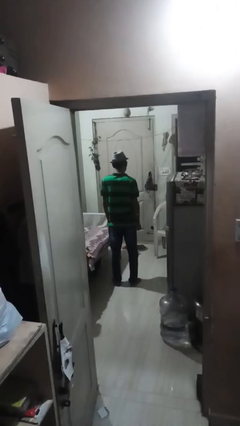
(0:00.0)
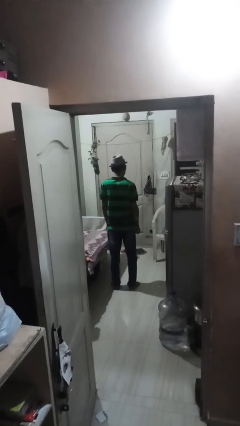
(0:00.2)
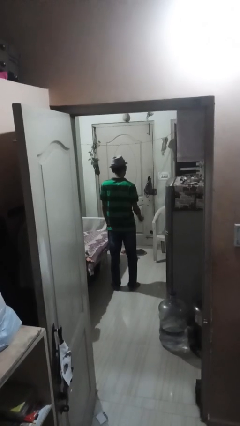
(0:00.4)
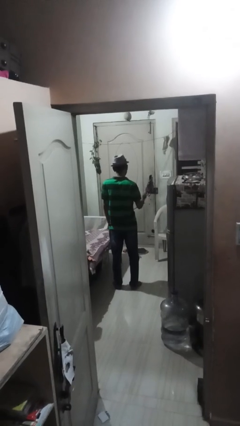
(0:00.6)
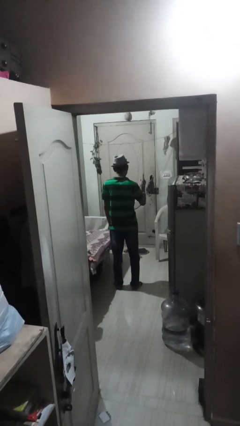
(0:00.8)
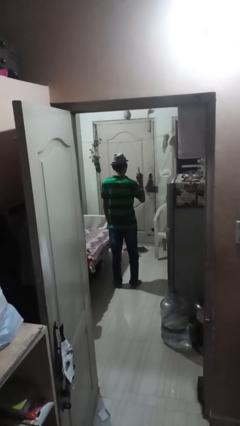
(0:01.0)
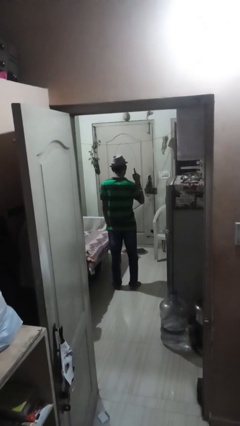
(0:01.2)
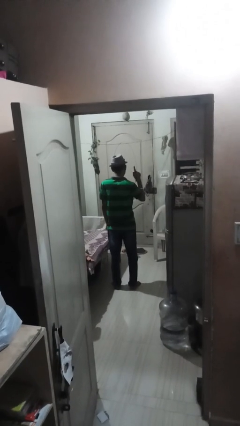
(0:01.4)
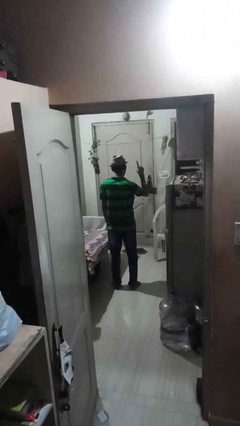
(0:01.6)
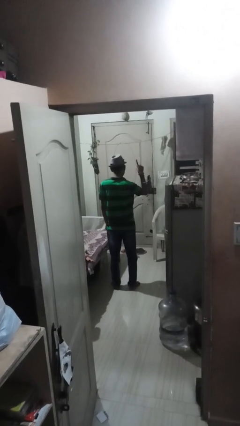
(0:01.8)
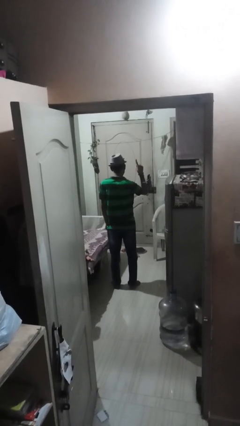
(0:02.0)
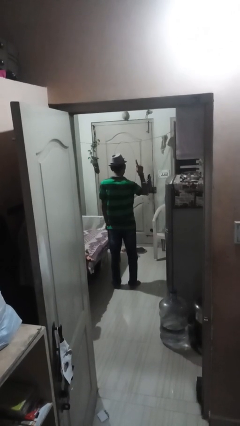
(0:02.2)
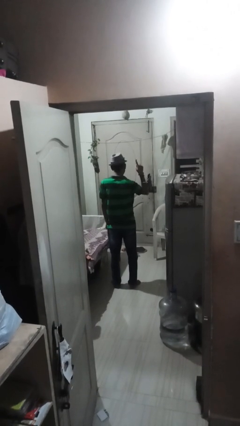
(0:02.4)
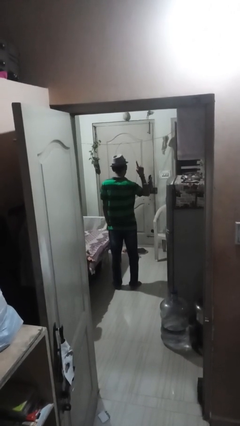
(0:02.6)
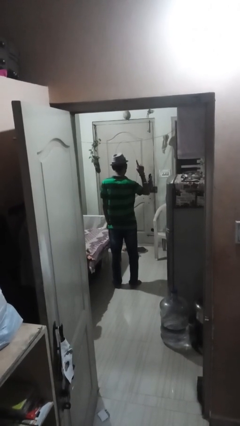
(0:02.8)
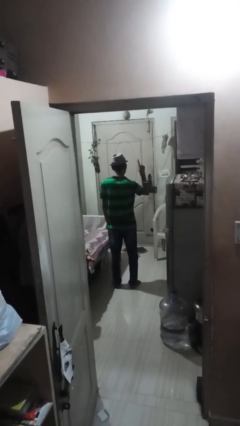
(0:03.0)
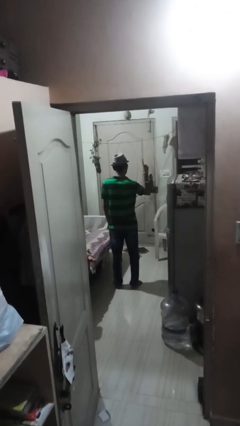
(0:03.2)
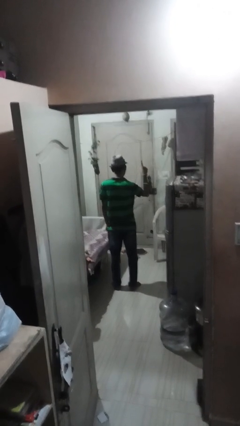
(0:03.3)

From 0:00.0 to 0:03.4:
person gestures number one

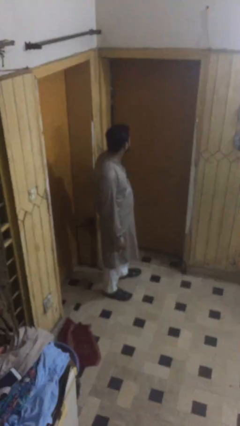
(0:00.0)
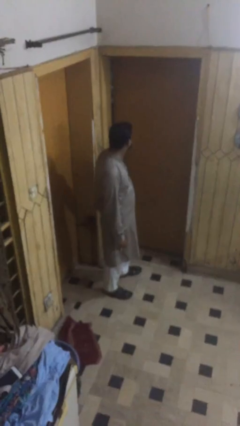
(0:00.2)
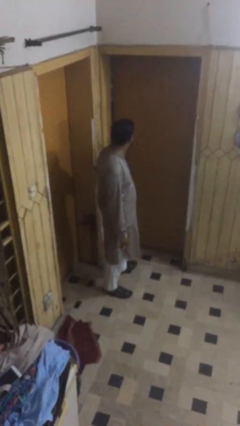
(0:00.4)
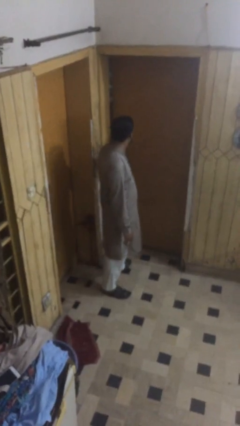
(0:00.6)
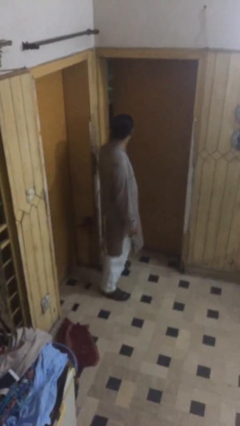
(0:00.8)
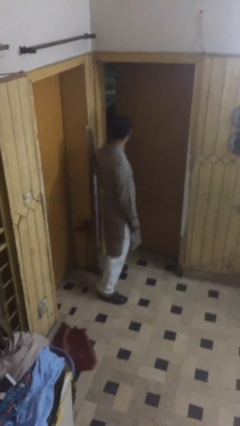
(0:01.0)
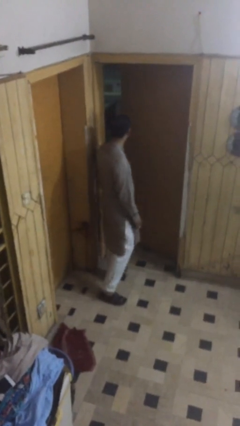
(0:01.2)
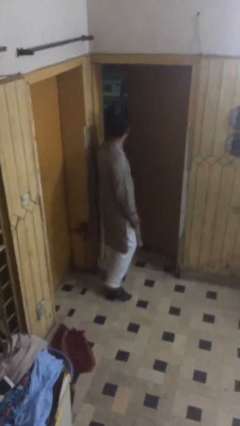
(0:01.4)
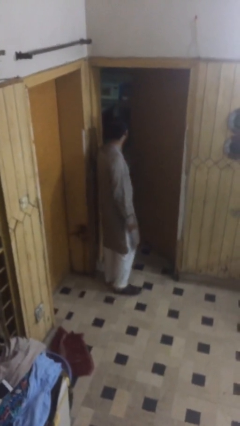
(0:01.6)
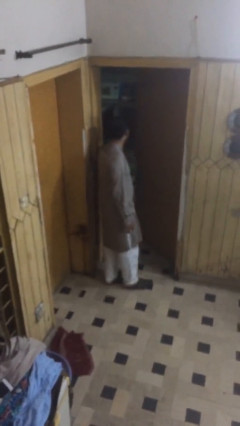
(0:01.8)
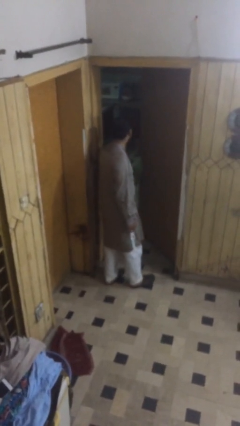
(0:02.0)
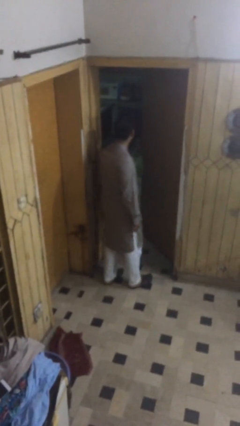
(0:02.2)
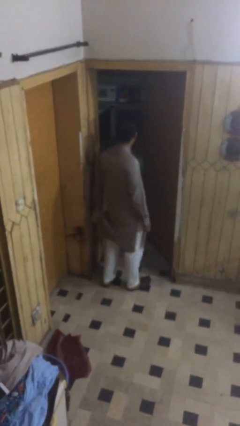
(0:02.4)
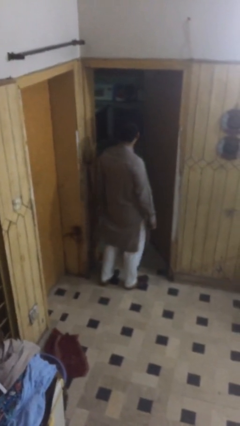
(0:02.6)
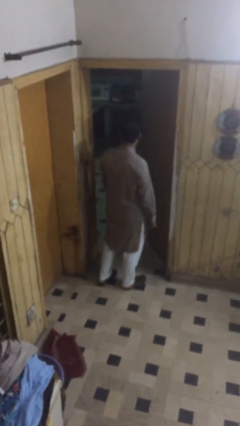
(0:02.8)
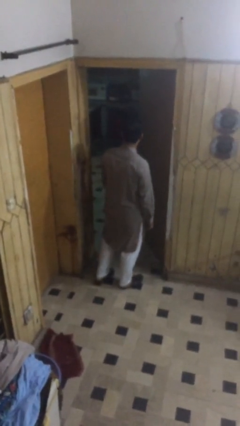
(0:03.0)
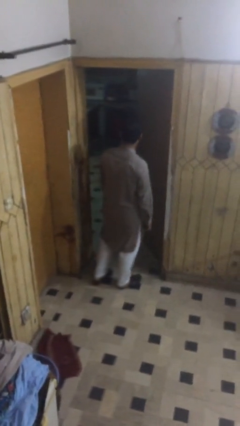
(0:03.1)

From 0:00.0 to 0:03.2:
person opens facility door

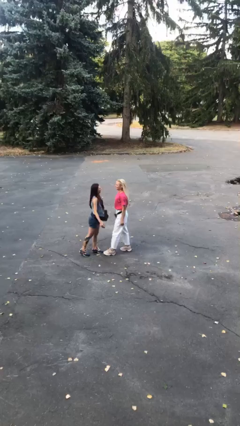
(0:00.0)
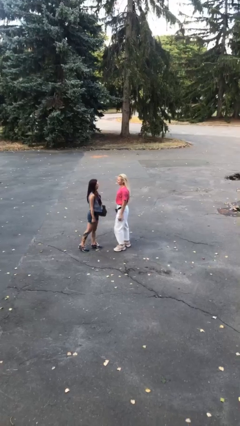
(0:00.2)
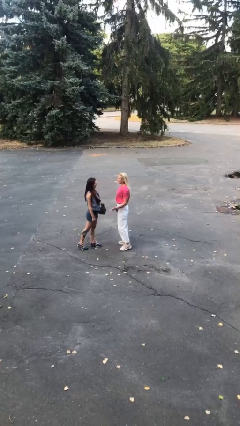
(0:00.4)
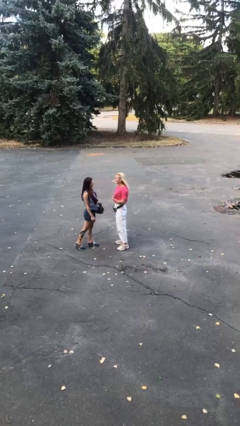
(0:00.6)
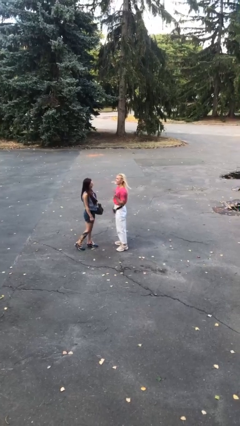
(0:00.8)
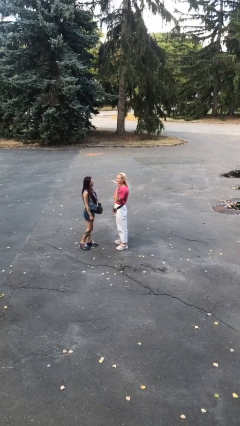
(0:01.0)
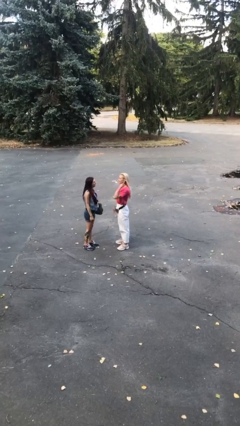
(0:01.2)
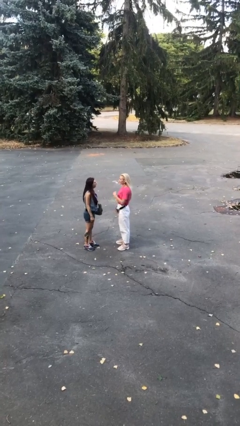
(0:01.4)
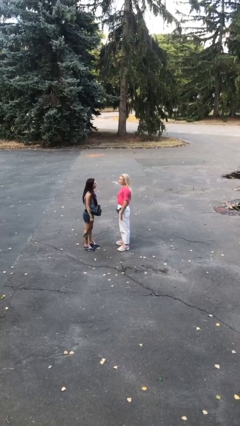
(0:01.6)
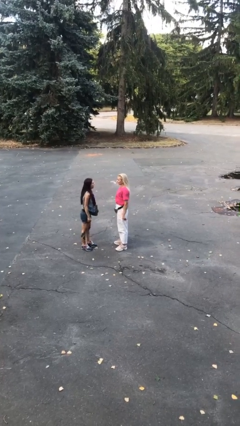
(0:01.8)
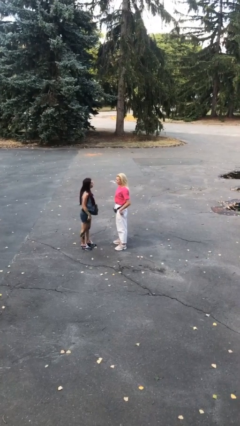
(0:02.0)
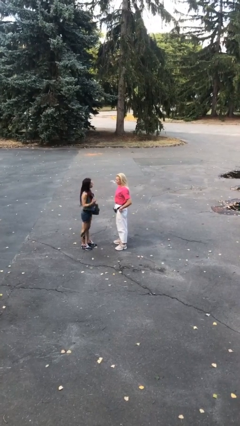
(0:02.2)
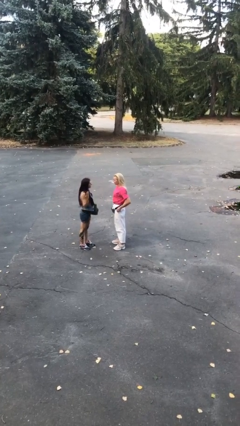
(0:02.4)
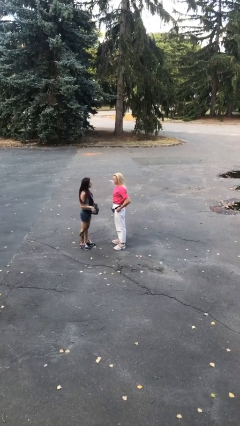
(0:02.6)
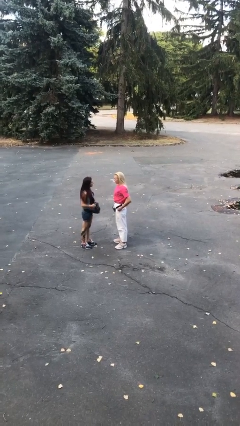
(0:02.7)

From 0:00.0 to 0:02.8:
person talks to person

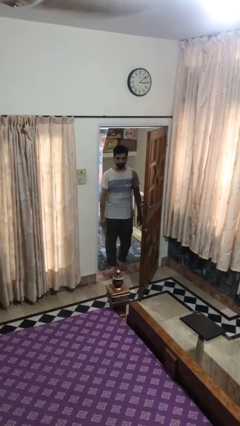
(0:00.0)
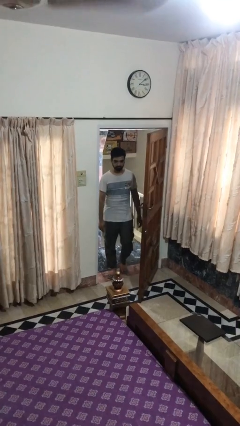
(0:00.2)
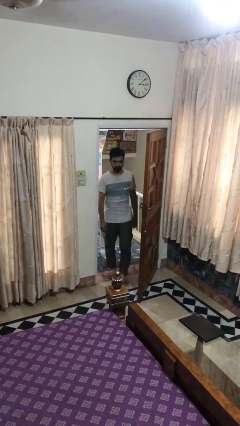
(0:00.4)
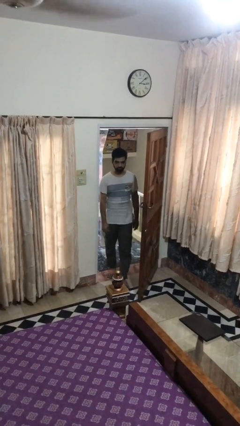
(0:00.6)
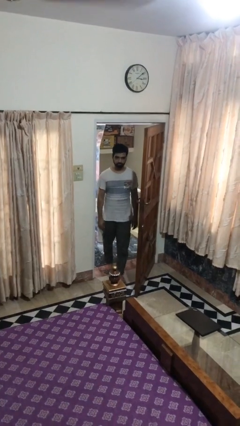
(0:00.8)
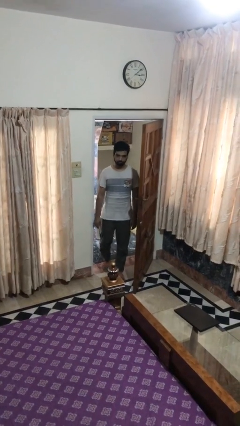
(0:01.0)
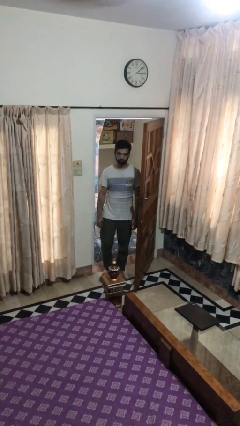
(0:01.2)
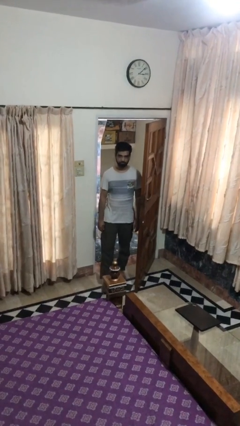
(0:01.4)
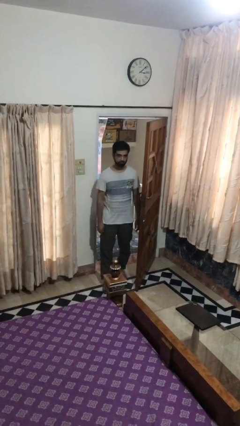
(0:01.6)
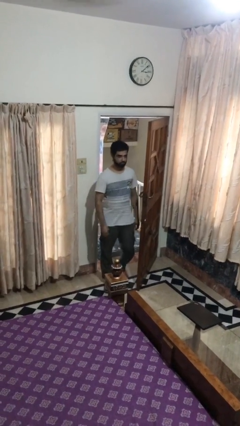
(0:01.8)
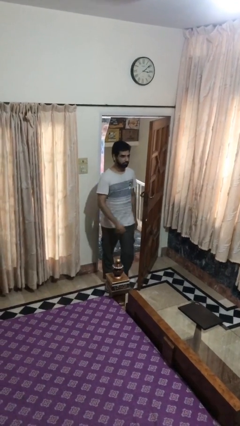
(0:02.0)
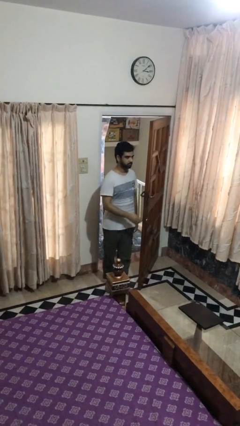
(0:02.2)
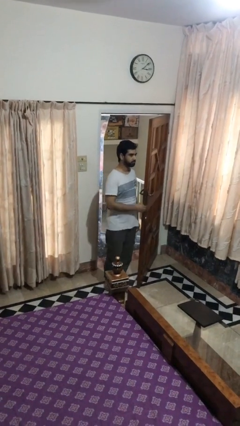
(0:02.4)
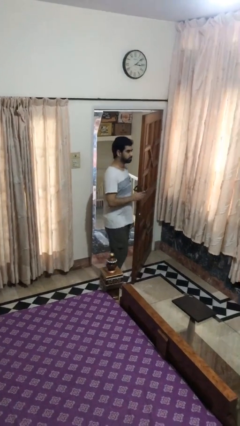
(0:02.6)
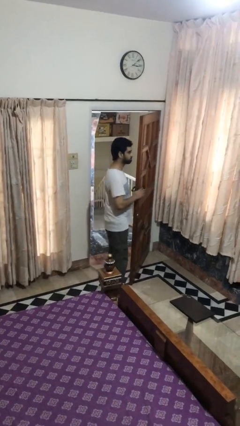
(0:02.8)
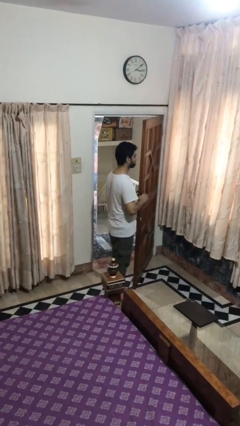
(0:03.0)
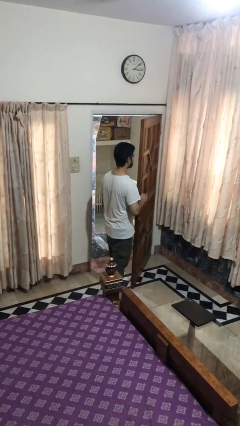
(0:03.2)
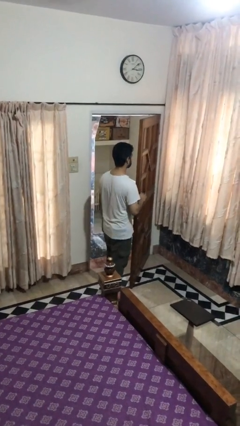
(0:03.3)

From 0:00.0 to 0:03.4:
person enters scene through structure

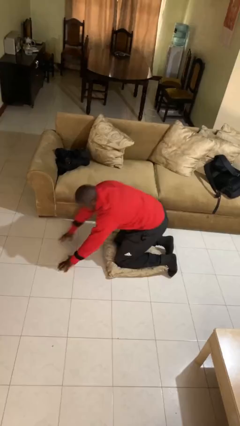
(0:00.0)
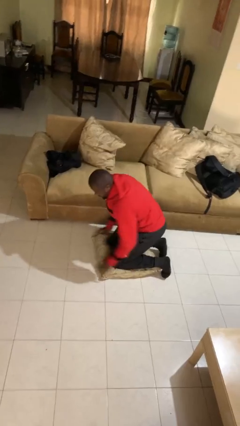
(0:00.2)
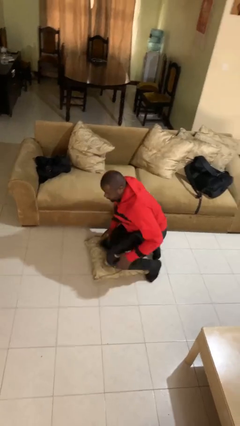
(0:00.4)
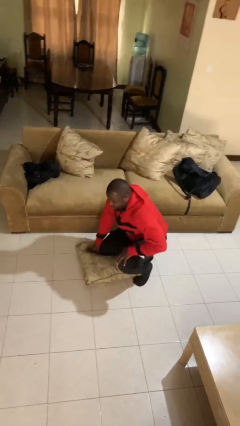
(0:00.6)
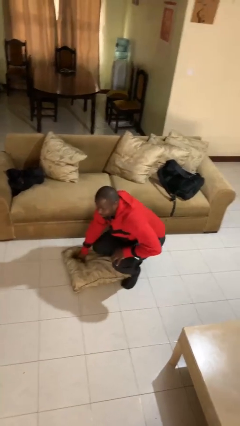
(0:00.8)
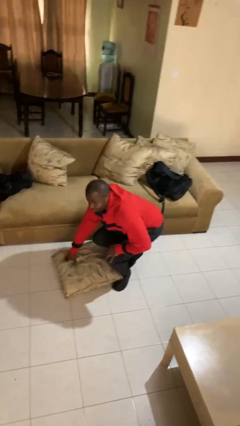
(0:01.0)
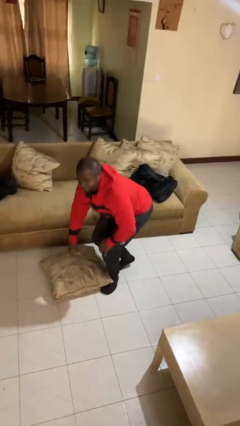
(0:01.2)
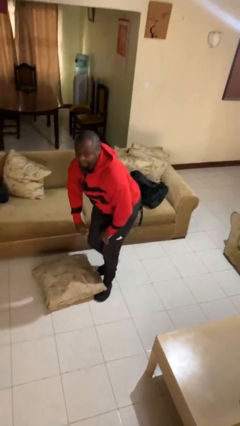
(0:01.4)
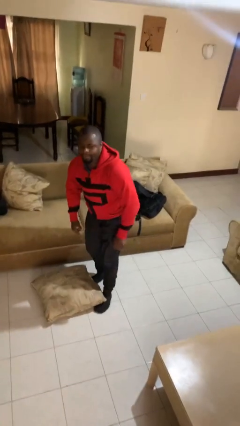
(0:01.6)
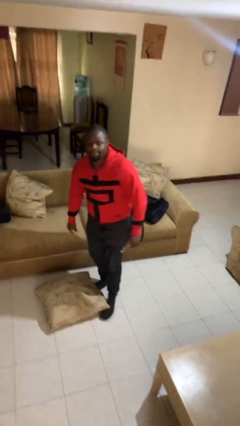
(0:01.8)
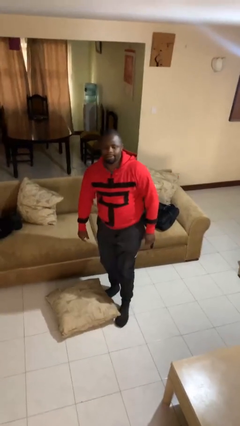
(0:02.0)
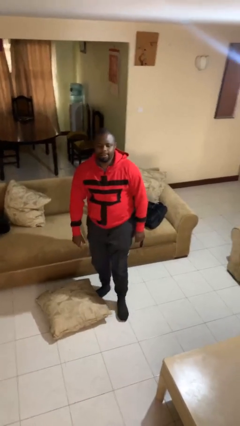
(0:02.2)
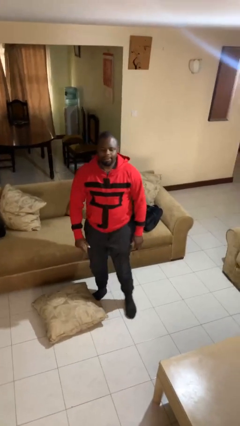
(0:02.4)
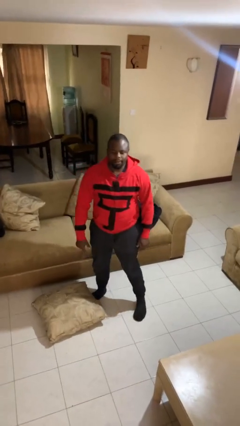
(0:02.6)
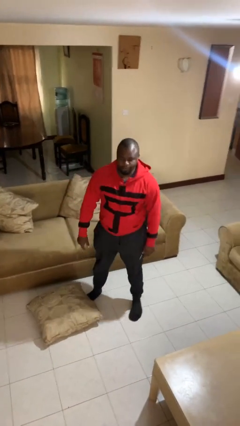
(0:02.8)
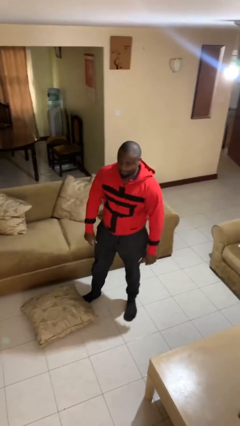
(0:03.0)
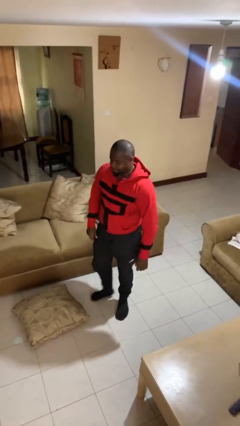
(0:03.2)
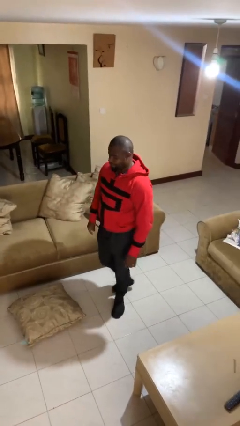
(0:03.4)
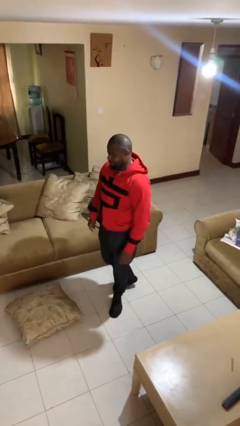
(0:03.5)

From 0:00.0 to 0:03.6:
person stands up from floor

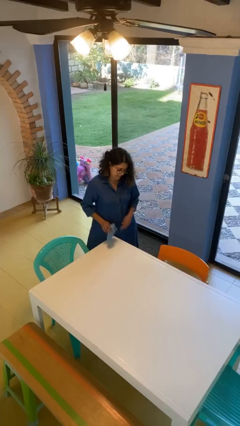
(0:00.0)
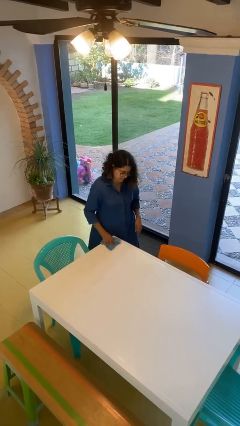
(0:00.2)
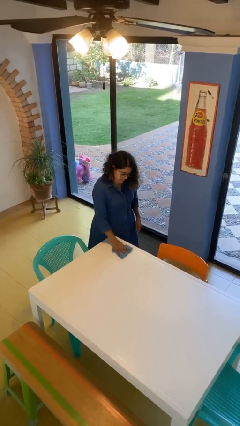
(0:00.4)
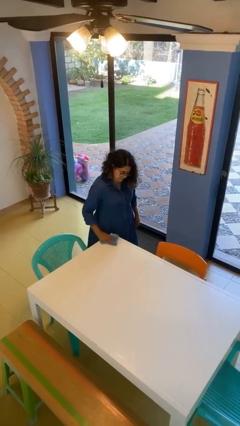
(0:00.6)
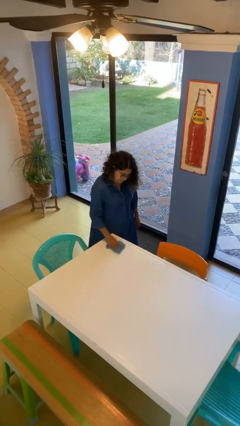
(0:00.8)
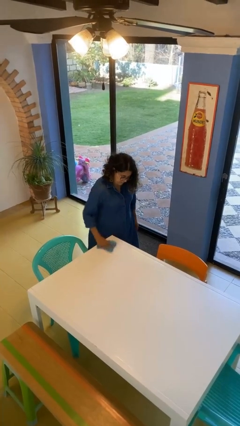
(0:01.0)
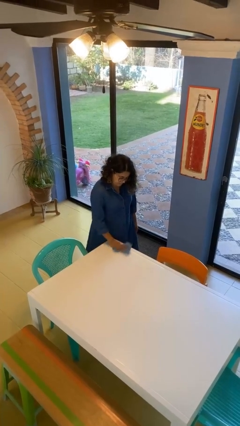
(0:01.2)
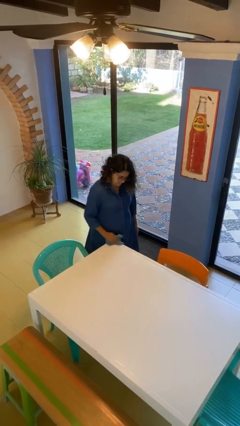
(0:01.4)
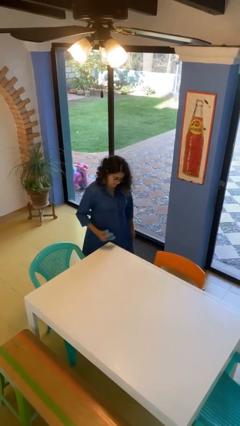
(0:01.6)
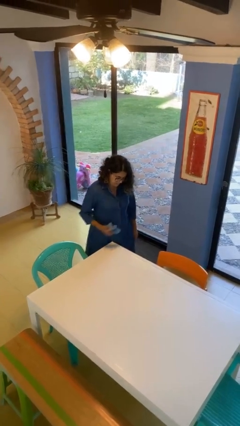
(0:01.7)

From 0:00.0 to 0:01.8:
person cleans table with rag
